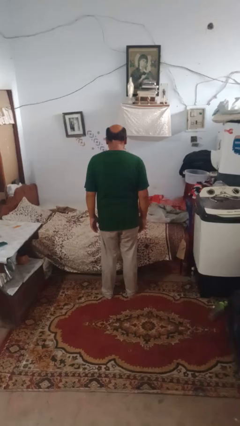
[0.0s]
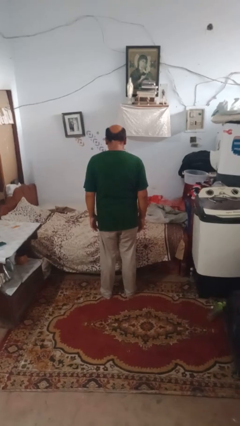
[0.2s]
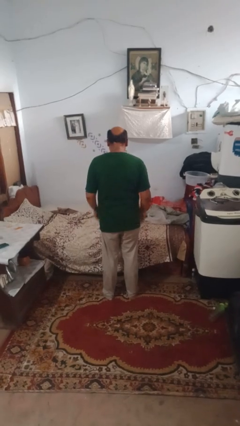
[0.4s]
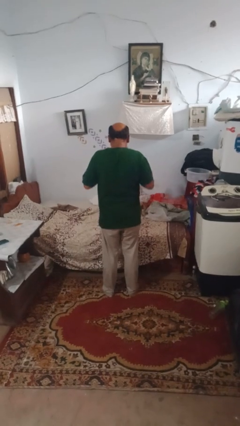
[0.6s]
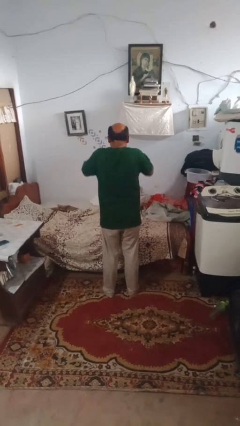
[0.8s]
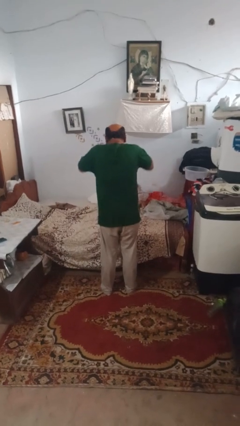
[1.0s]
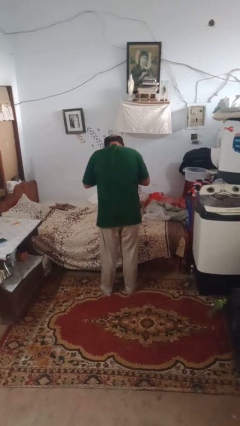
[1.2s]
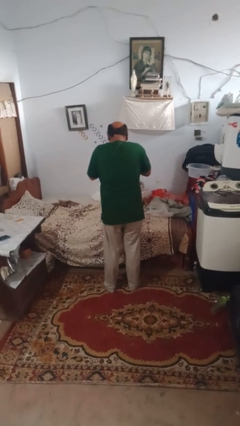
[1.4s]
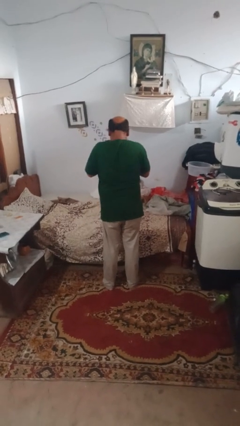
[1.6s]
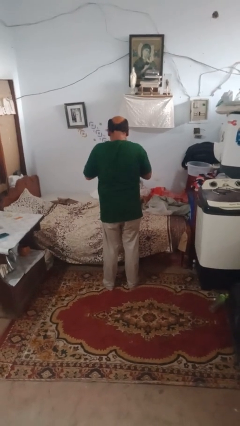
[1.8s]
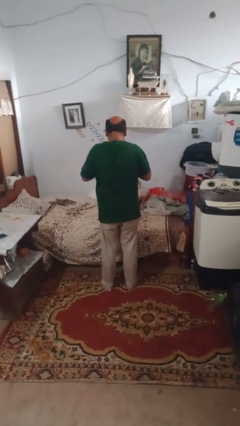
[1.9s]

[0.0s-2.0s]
person sneezes into hand

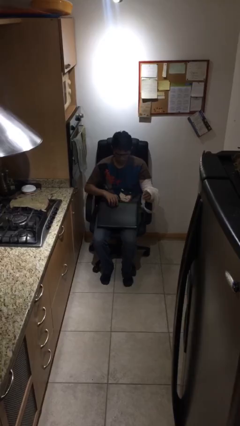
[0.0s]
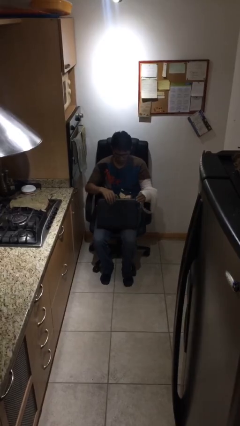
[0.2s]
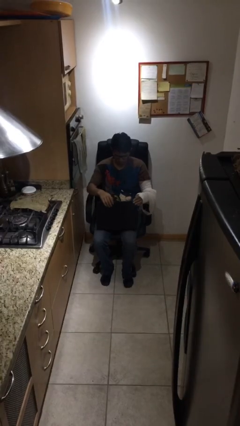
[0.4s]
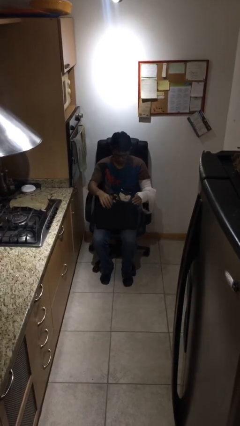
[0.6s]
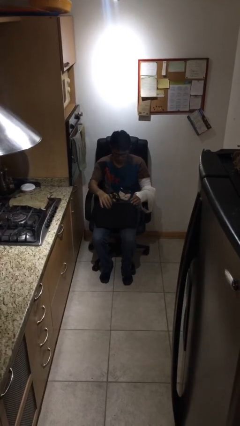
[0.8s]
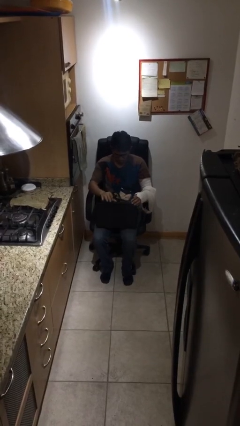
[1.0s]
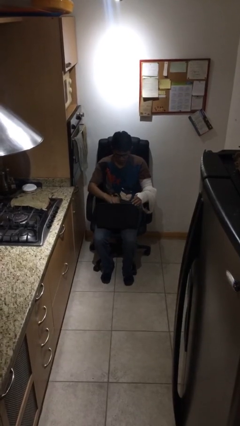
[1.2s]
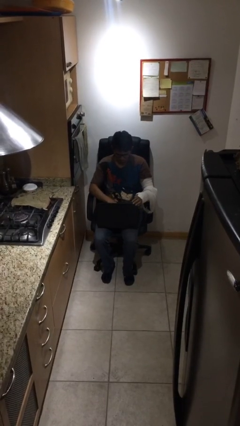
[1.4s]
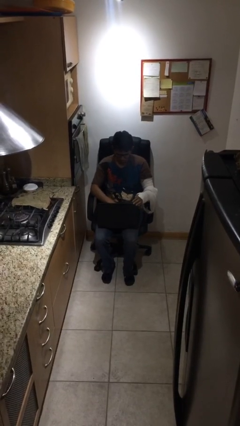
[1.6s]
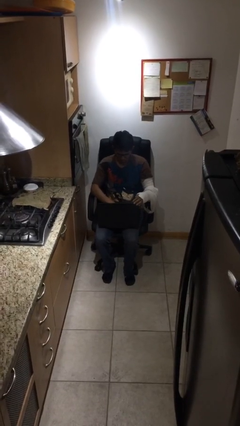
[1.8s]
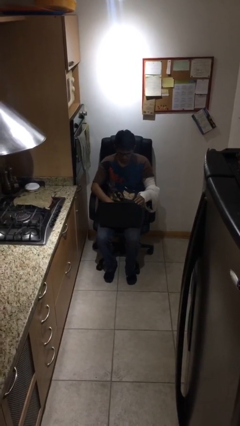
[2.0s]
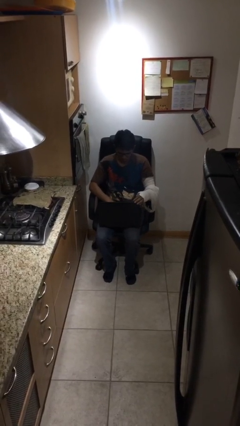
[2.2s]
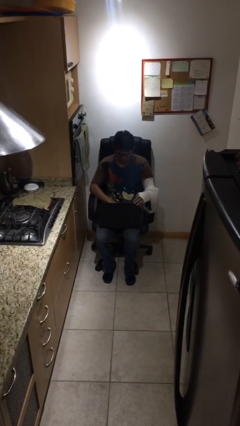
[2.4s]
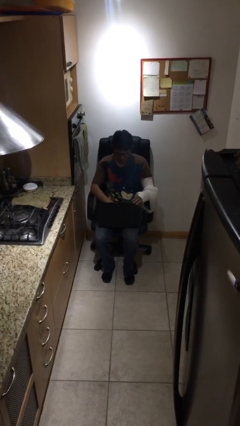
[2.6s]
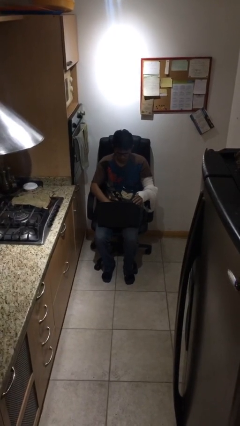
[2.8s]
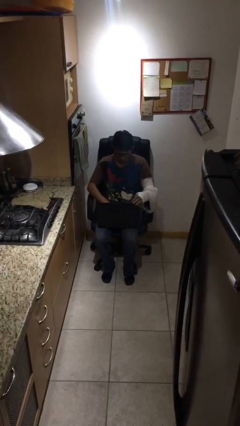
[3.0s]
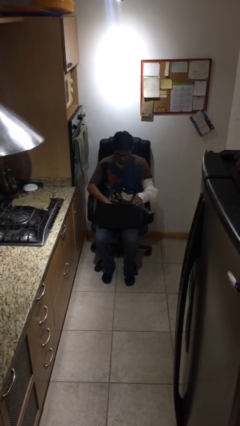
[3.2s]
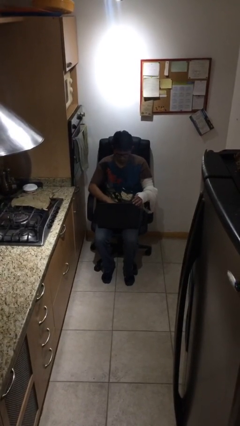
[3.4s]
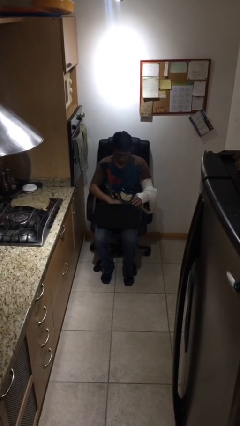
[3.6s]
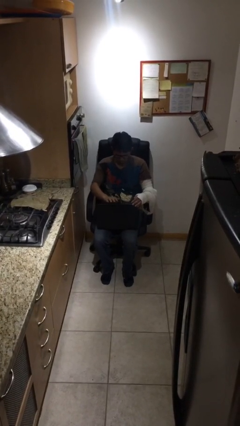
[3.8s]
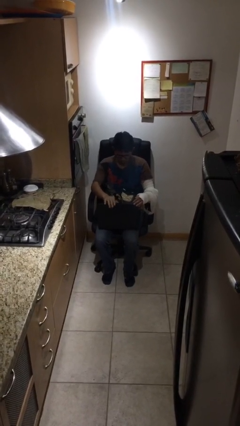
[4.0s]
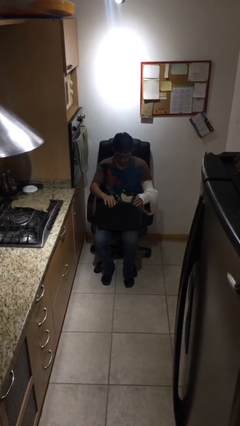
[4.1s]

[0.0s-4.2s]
person interacts with laptop

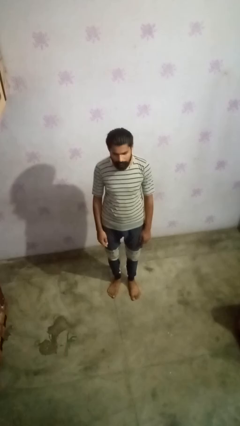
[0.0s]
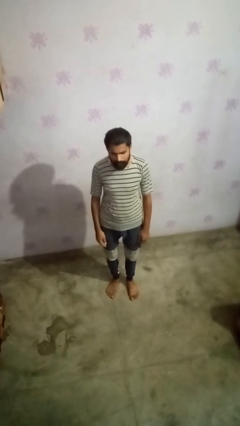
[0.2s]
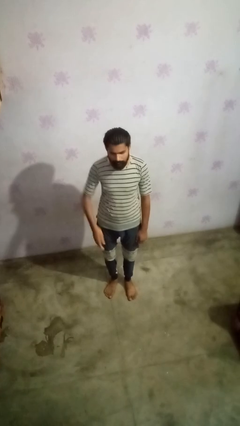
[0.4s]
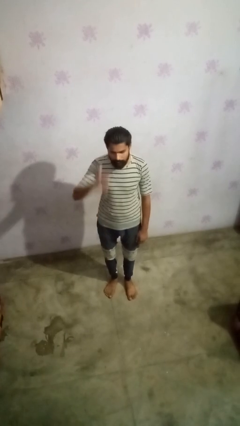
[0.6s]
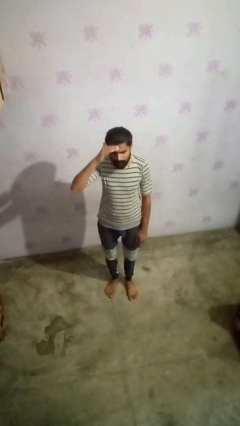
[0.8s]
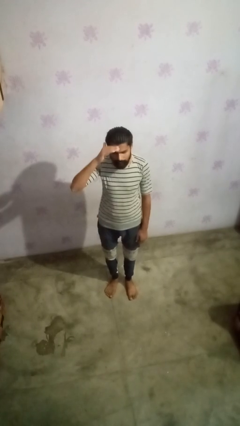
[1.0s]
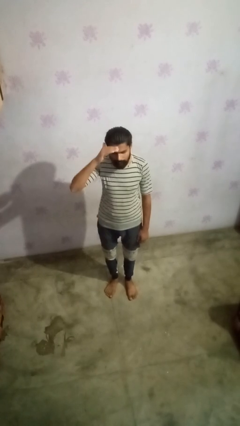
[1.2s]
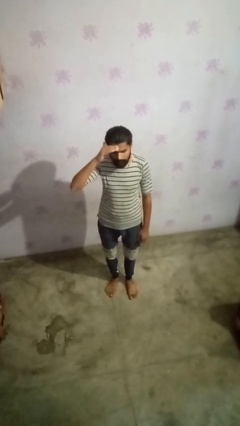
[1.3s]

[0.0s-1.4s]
person salutes

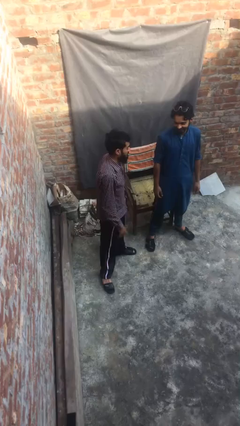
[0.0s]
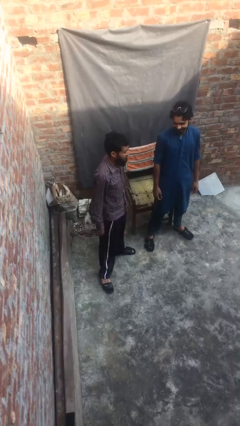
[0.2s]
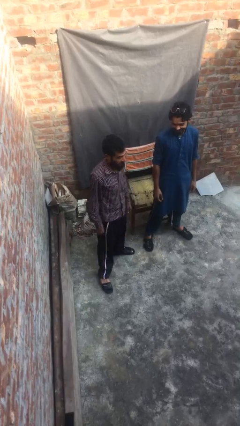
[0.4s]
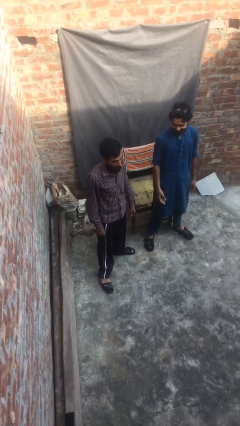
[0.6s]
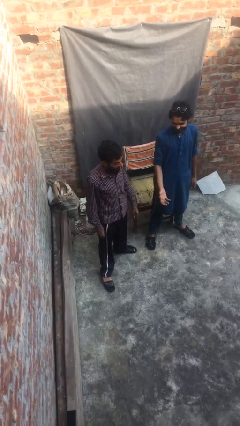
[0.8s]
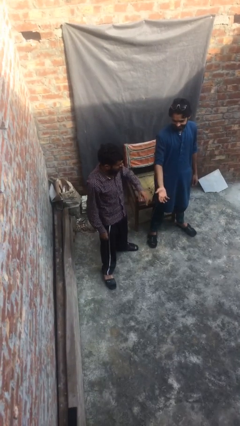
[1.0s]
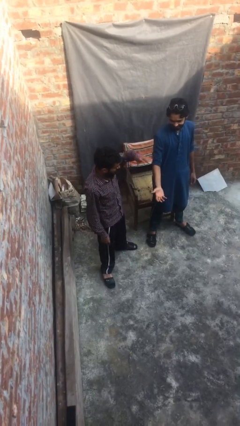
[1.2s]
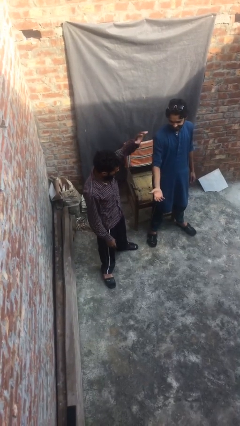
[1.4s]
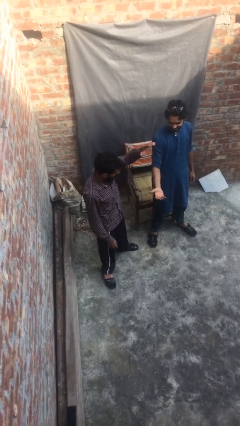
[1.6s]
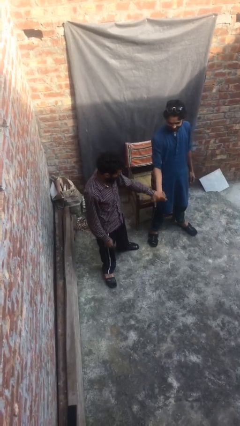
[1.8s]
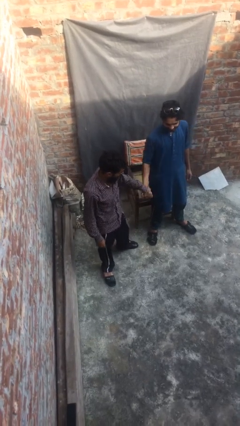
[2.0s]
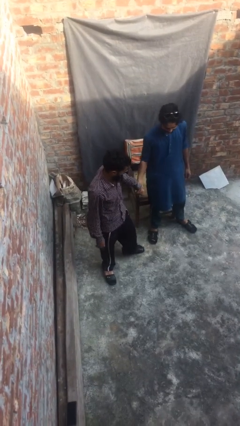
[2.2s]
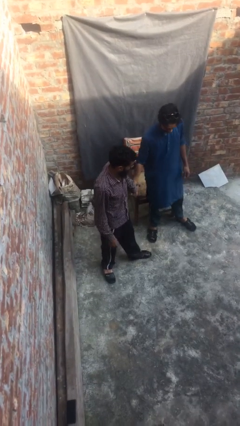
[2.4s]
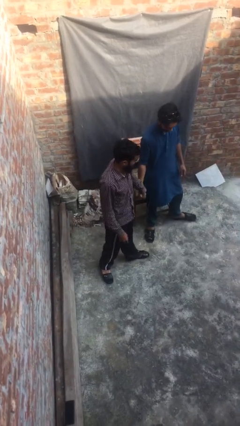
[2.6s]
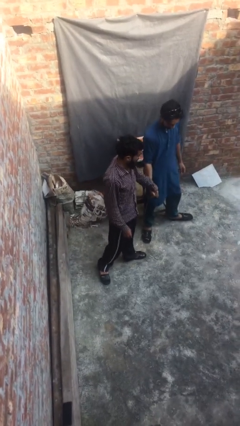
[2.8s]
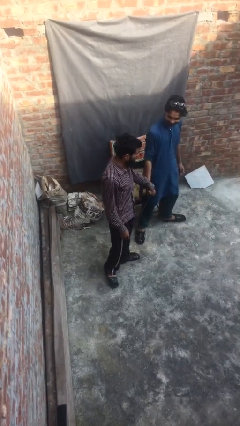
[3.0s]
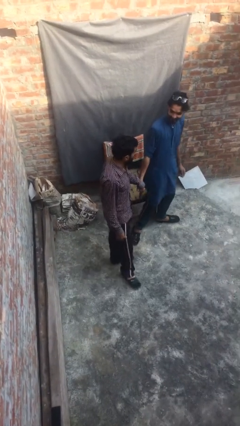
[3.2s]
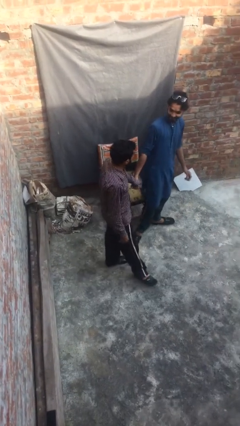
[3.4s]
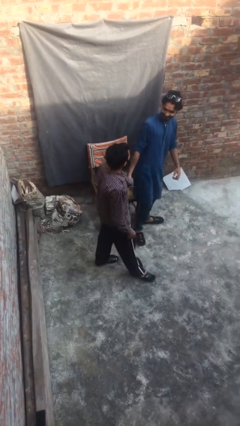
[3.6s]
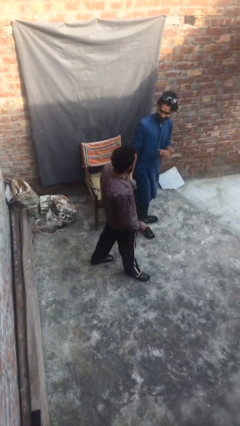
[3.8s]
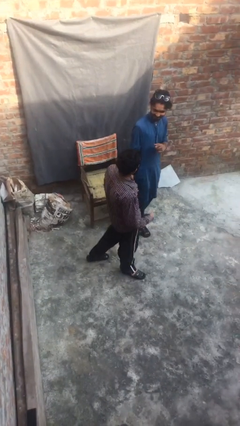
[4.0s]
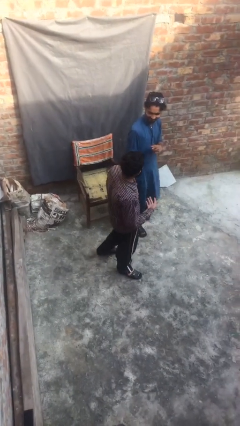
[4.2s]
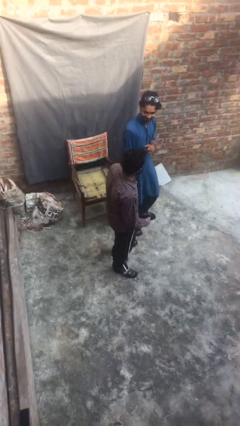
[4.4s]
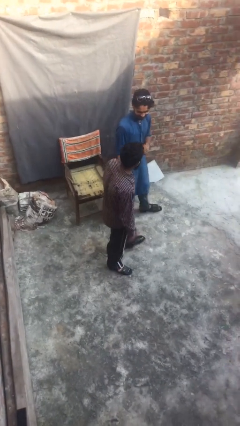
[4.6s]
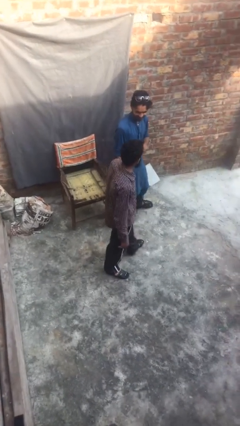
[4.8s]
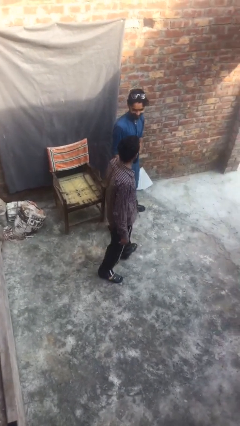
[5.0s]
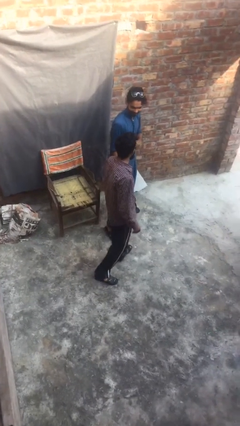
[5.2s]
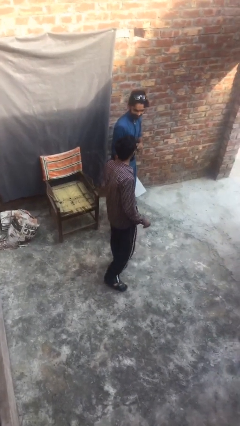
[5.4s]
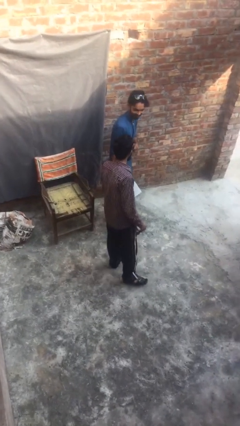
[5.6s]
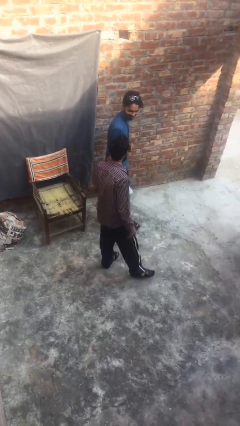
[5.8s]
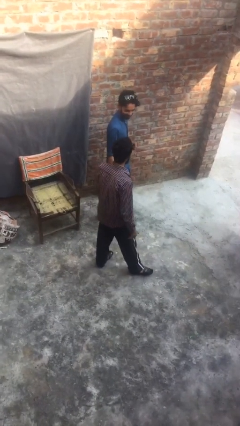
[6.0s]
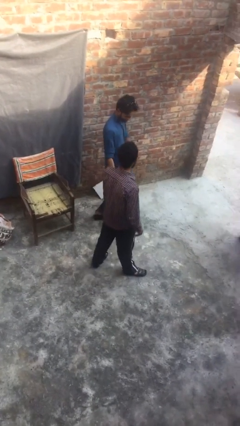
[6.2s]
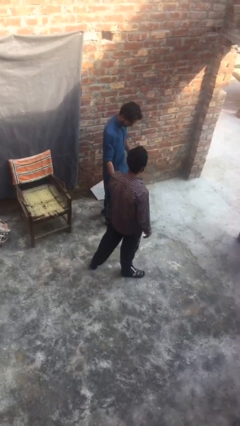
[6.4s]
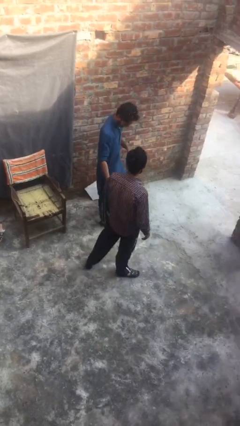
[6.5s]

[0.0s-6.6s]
person holds hand

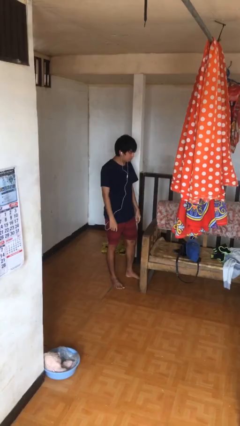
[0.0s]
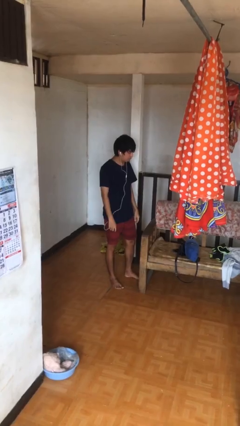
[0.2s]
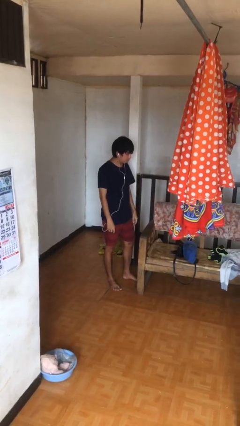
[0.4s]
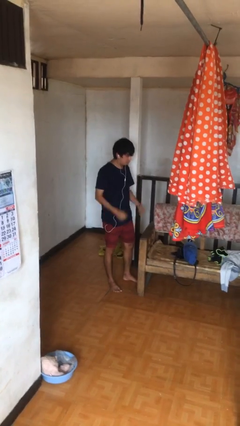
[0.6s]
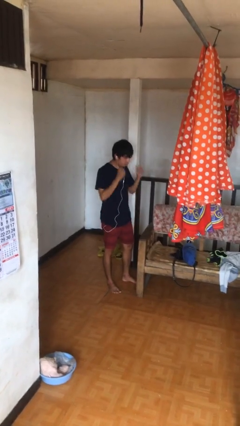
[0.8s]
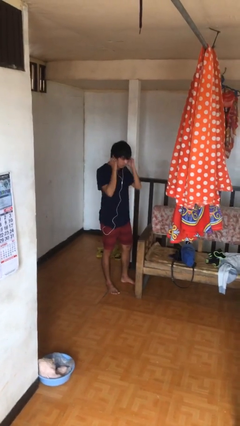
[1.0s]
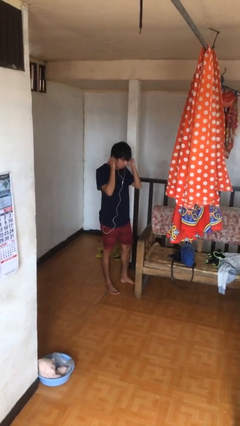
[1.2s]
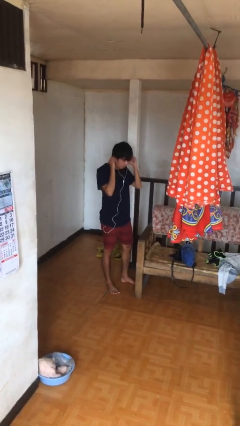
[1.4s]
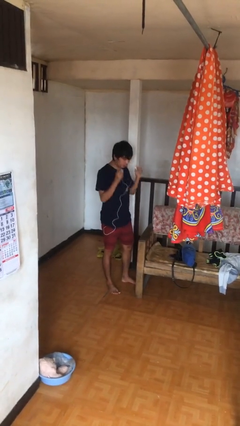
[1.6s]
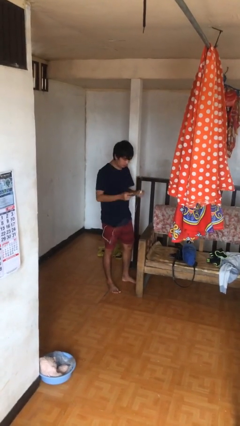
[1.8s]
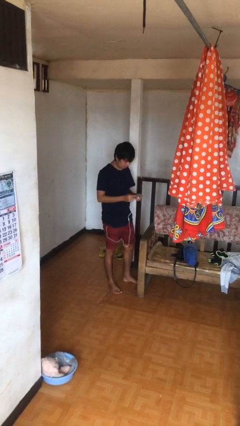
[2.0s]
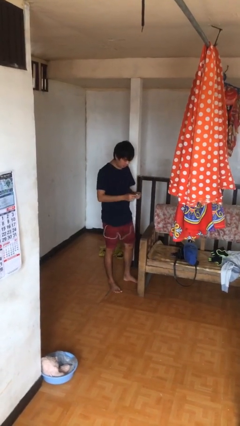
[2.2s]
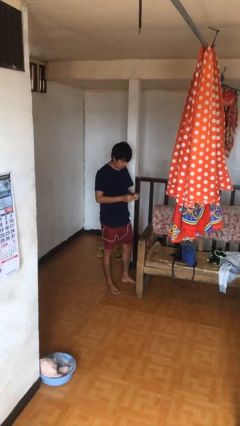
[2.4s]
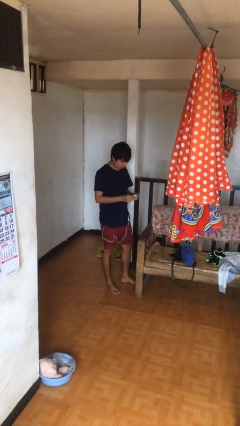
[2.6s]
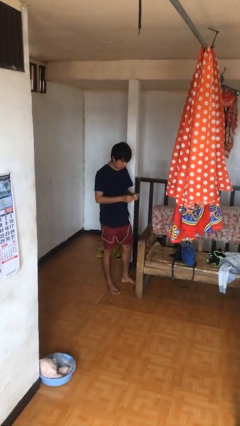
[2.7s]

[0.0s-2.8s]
person takes off headphones

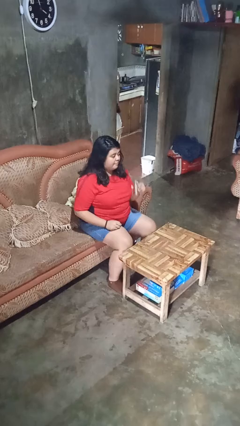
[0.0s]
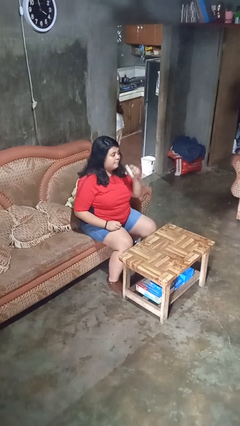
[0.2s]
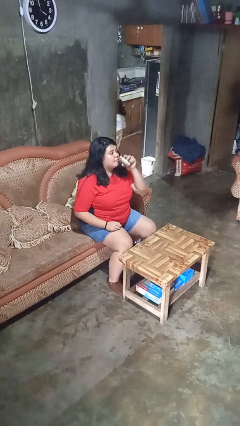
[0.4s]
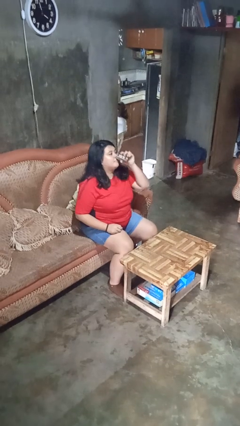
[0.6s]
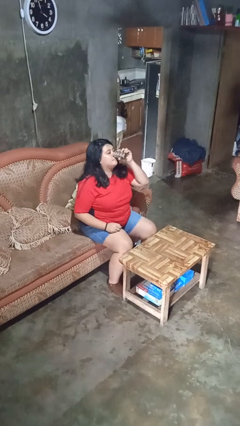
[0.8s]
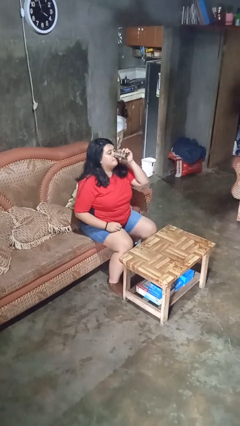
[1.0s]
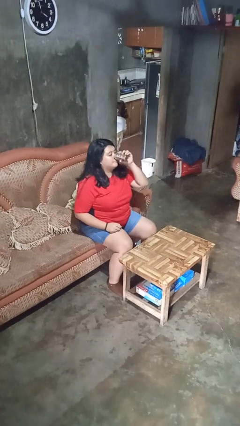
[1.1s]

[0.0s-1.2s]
person drinks from beverage can
